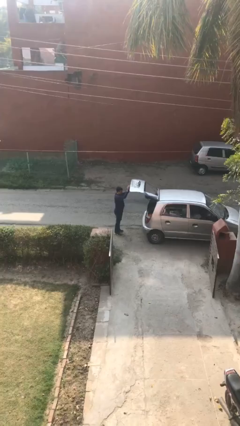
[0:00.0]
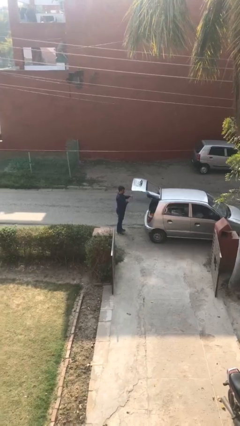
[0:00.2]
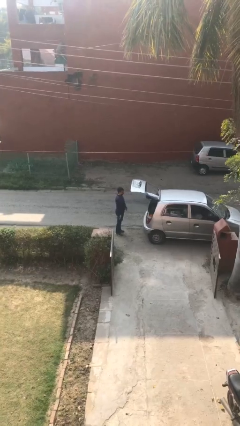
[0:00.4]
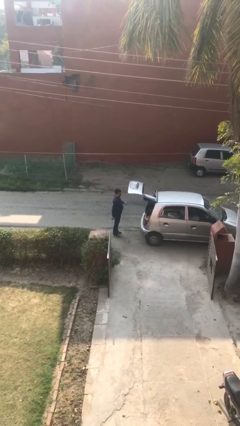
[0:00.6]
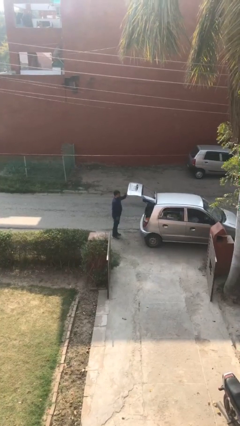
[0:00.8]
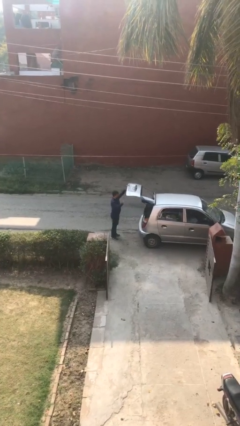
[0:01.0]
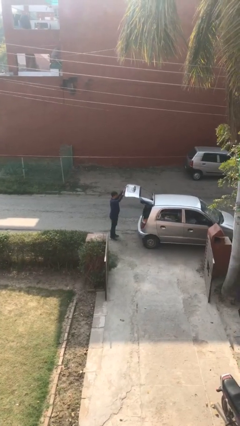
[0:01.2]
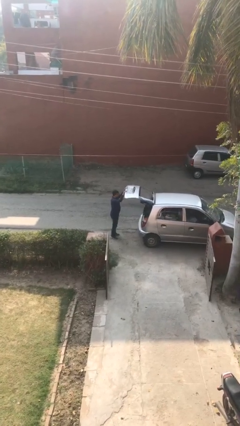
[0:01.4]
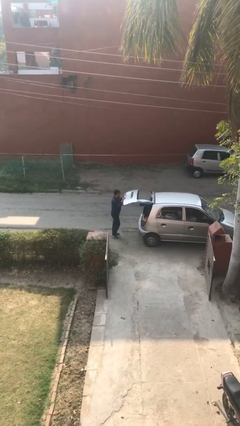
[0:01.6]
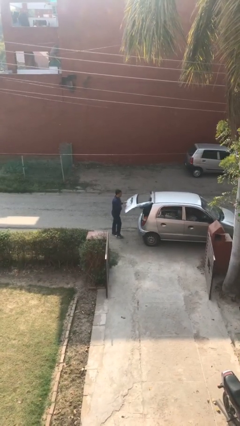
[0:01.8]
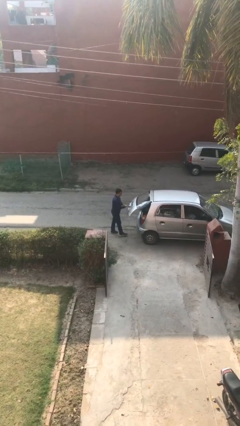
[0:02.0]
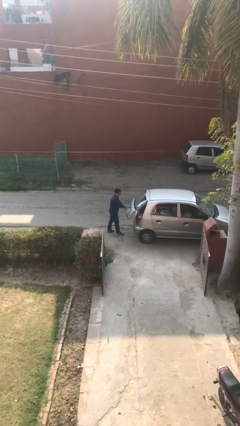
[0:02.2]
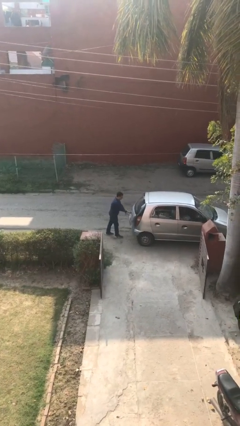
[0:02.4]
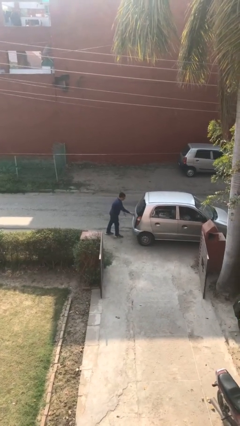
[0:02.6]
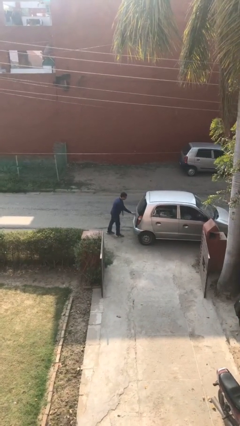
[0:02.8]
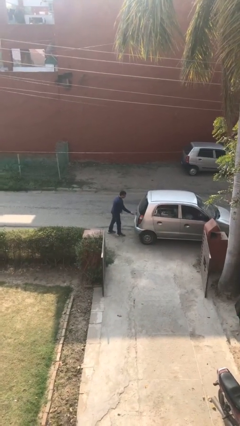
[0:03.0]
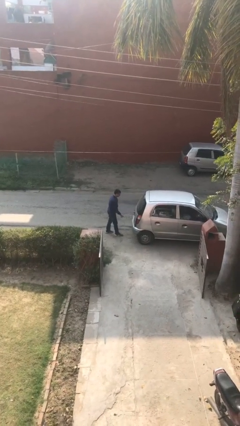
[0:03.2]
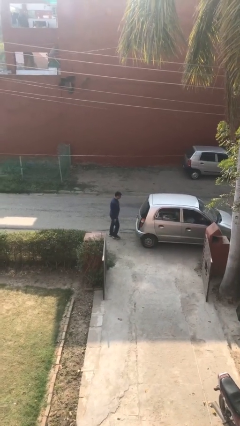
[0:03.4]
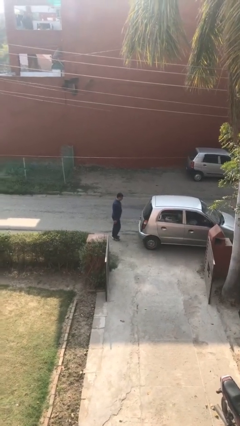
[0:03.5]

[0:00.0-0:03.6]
person closes car trunk

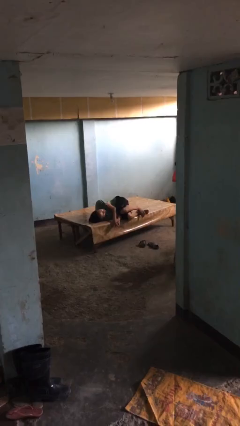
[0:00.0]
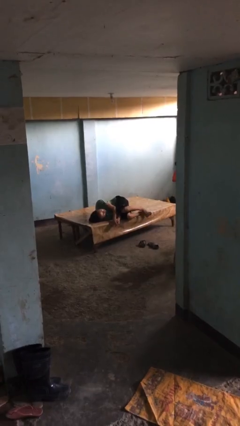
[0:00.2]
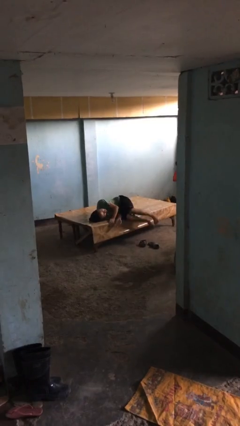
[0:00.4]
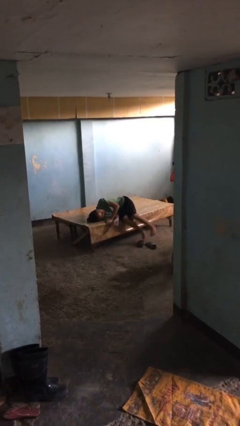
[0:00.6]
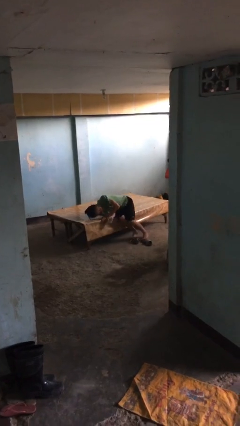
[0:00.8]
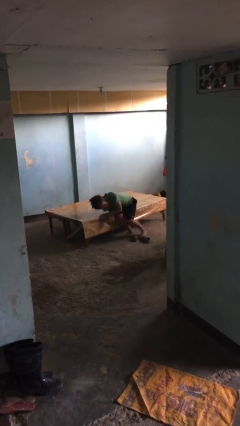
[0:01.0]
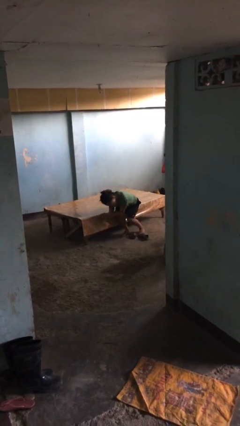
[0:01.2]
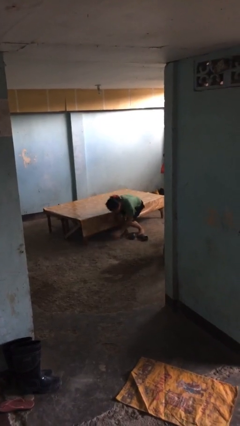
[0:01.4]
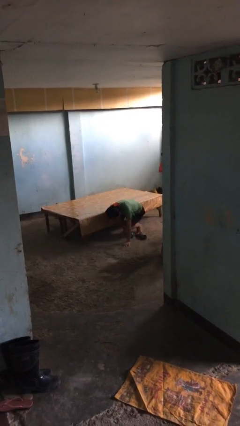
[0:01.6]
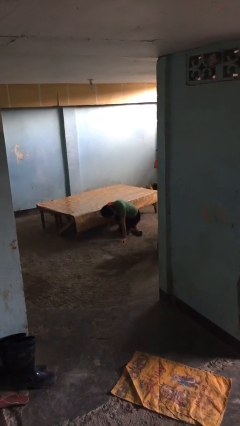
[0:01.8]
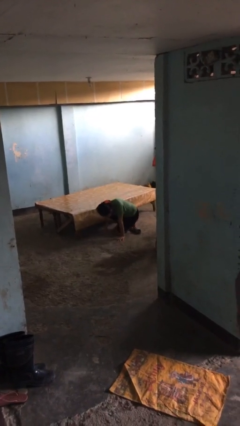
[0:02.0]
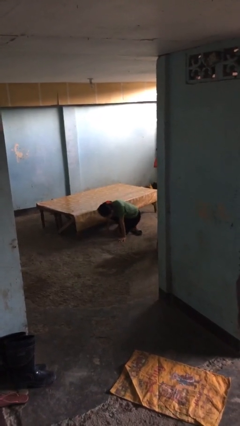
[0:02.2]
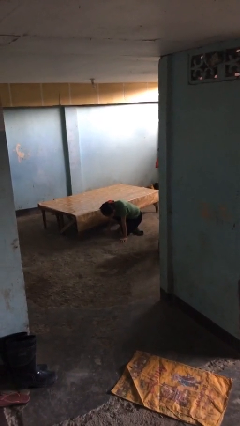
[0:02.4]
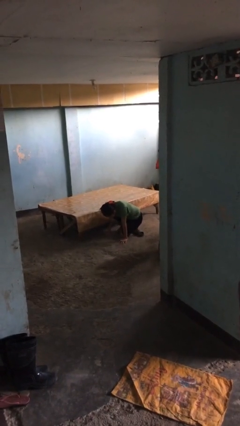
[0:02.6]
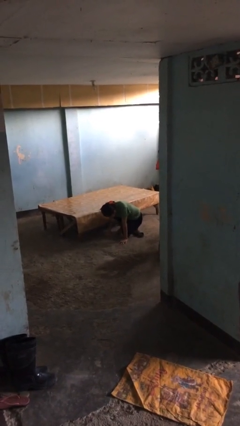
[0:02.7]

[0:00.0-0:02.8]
person falls from bed

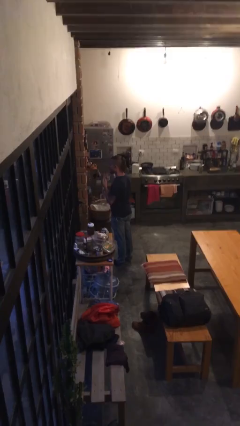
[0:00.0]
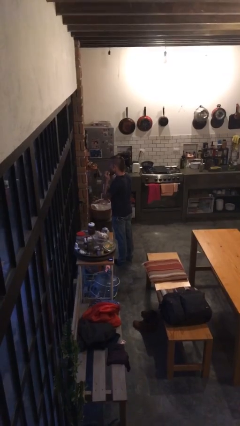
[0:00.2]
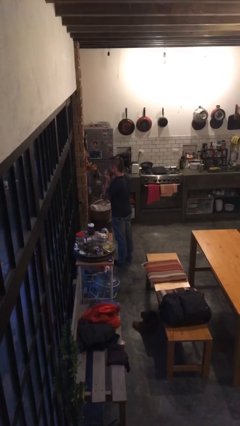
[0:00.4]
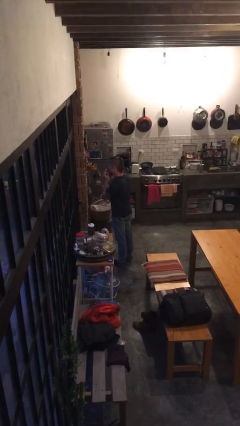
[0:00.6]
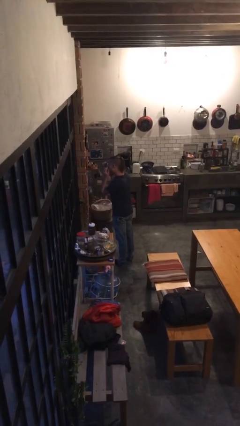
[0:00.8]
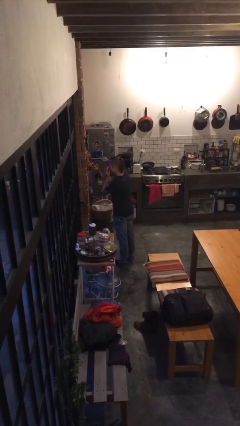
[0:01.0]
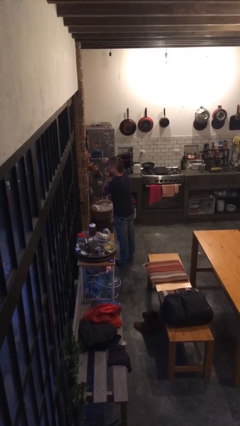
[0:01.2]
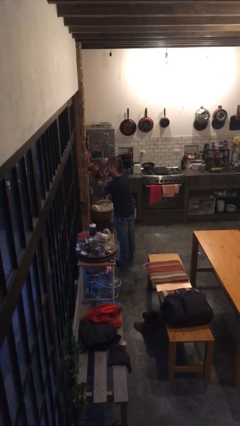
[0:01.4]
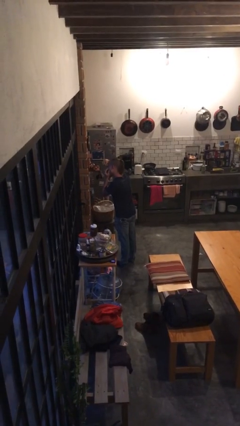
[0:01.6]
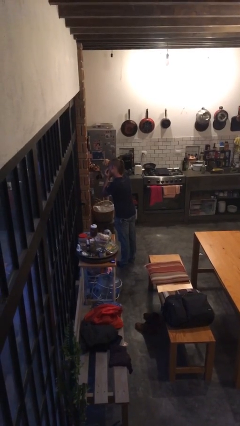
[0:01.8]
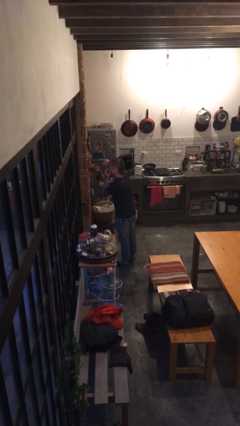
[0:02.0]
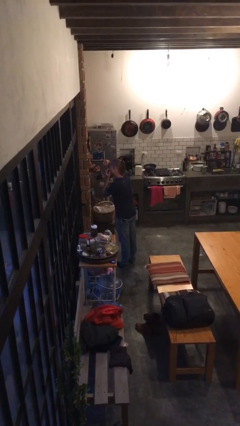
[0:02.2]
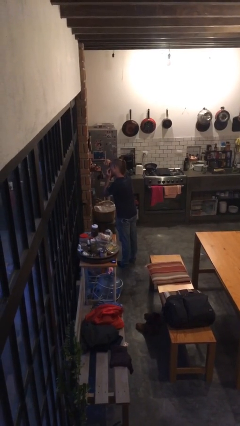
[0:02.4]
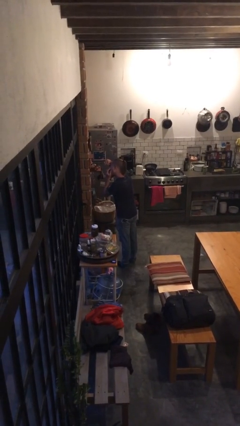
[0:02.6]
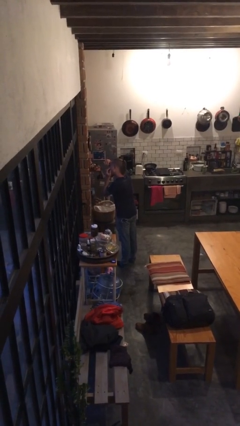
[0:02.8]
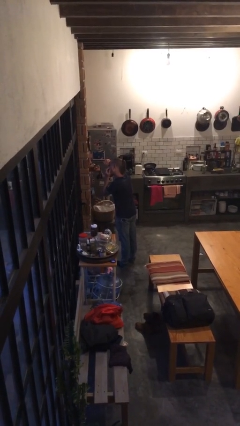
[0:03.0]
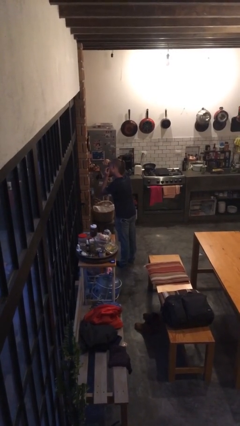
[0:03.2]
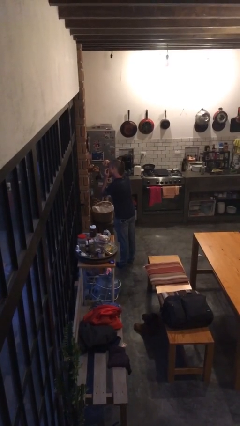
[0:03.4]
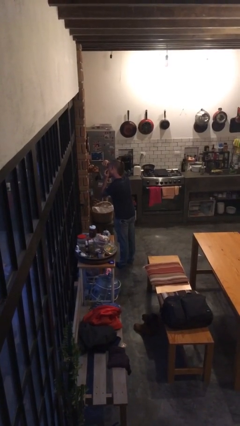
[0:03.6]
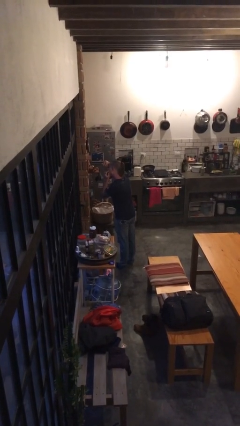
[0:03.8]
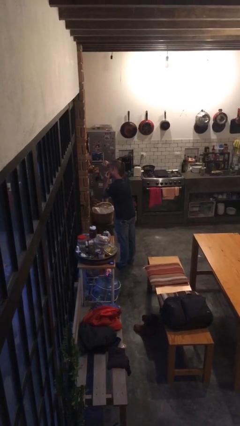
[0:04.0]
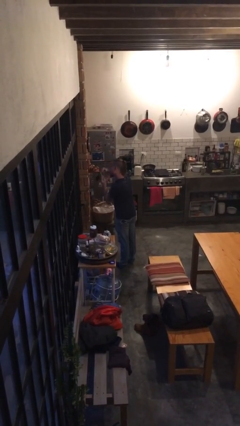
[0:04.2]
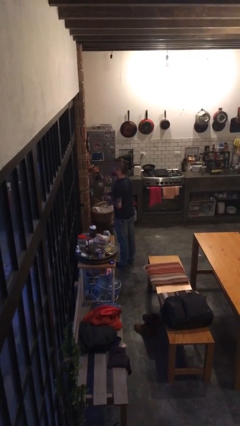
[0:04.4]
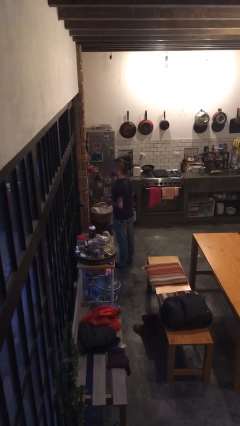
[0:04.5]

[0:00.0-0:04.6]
person applies eye makeup

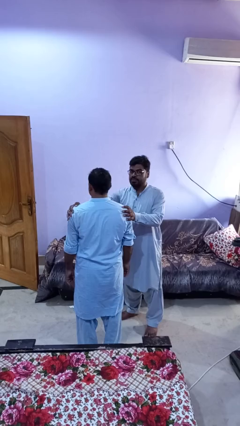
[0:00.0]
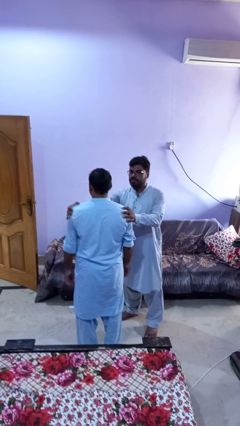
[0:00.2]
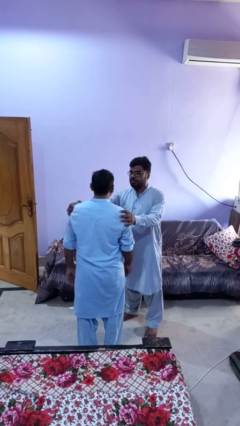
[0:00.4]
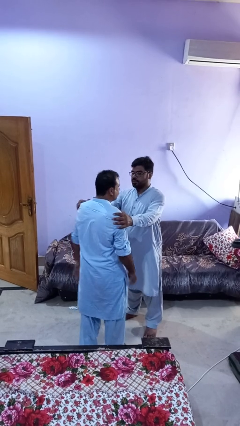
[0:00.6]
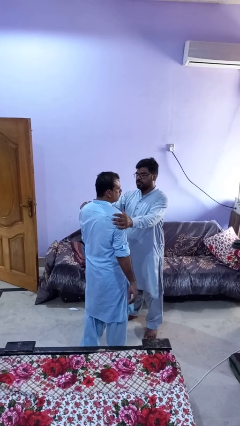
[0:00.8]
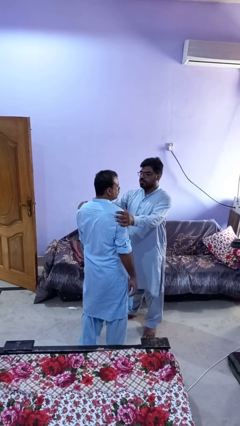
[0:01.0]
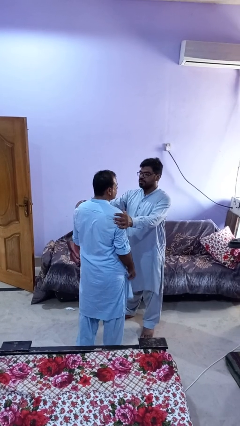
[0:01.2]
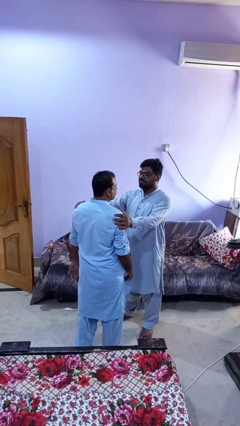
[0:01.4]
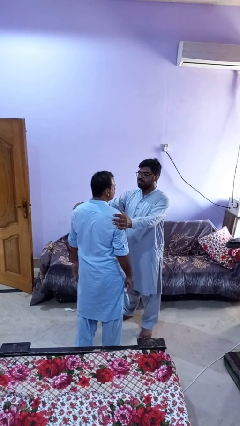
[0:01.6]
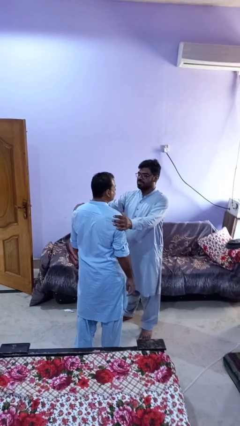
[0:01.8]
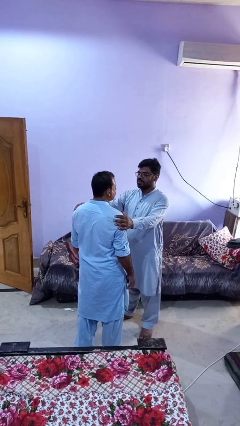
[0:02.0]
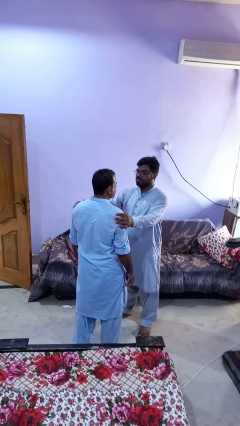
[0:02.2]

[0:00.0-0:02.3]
person spins person around

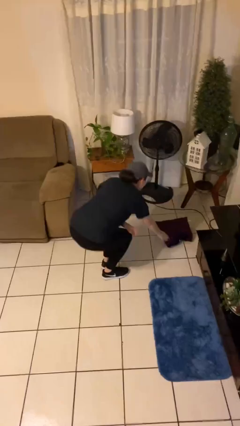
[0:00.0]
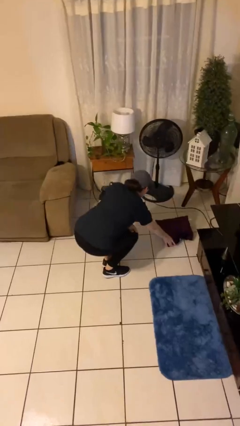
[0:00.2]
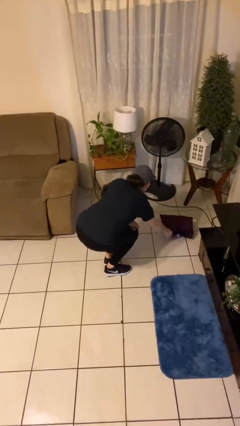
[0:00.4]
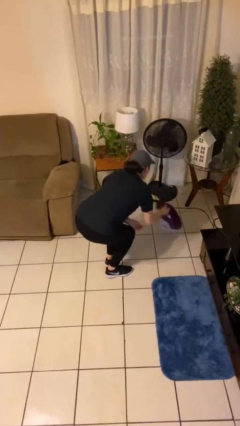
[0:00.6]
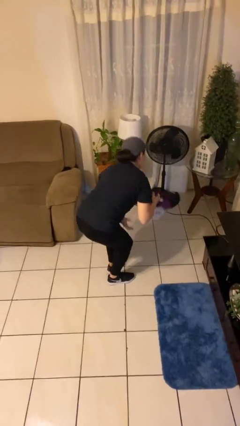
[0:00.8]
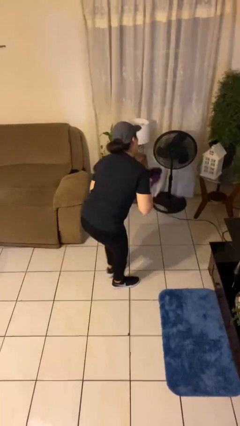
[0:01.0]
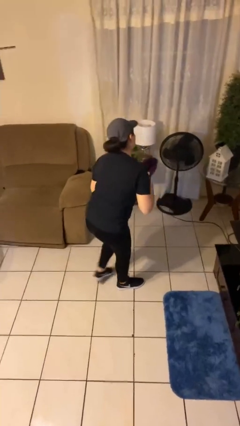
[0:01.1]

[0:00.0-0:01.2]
person picks up object from floor

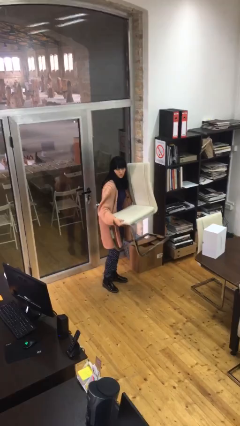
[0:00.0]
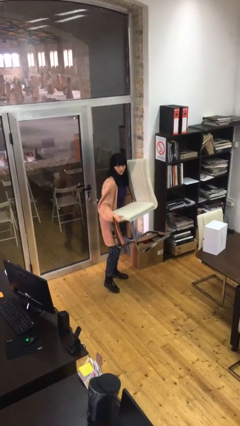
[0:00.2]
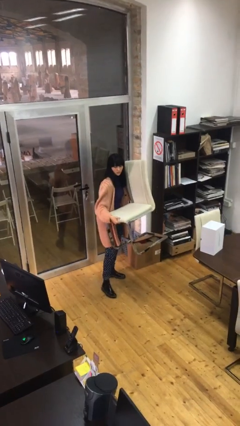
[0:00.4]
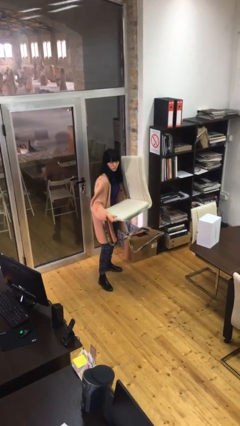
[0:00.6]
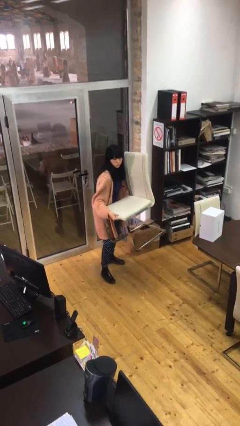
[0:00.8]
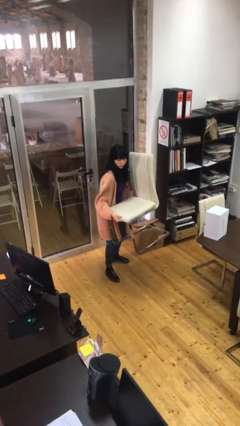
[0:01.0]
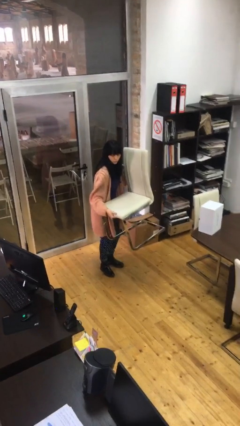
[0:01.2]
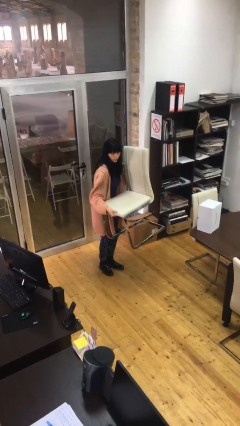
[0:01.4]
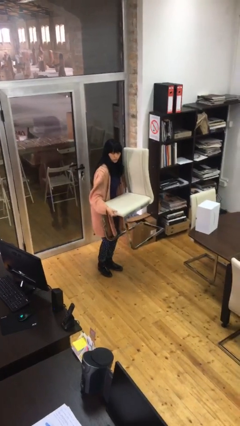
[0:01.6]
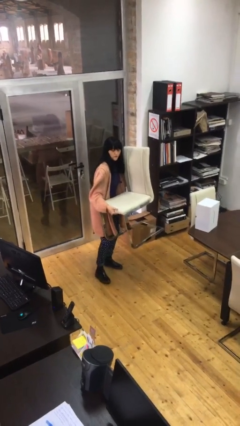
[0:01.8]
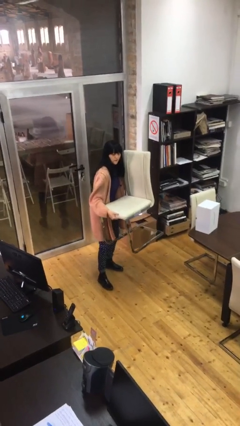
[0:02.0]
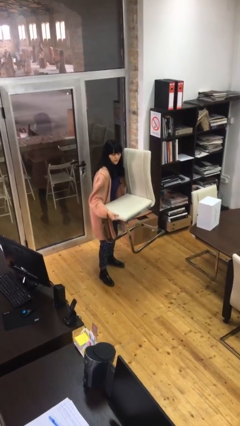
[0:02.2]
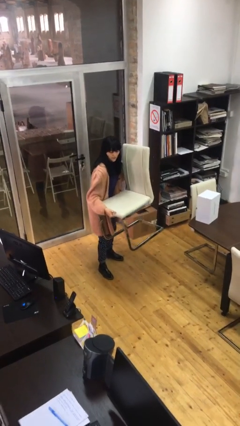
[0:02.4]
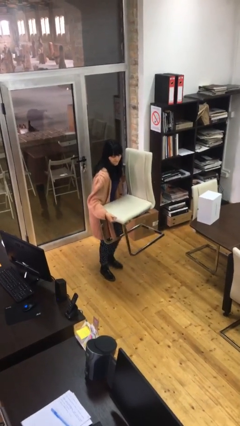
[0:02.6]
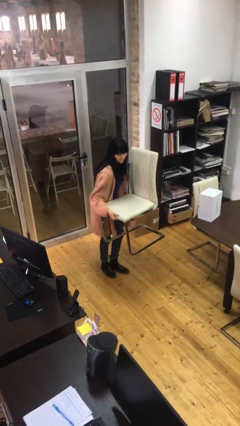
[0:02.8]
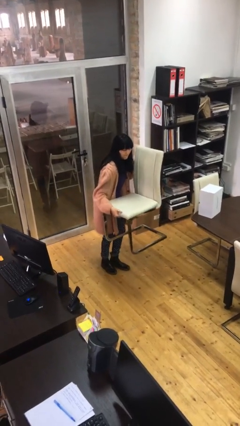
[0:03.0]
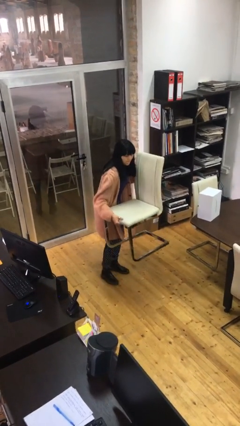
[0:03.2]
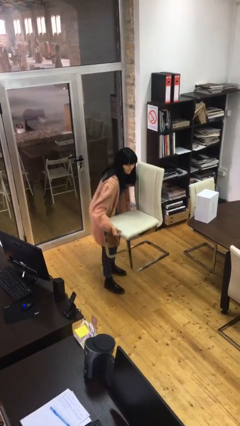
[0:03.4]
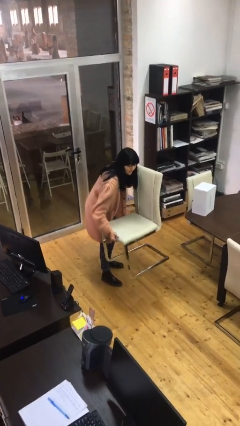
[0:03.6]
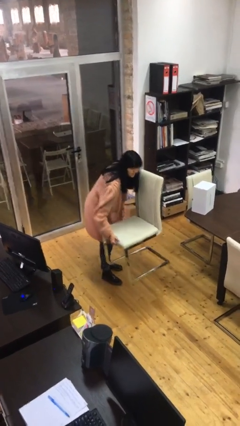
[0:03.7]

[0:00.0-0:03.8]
person carries heavy object
